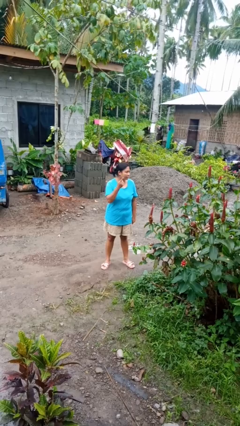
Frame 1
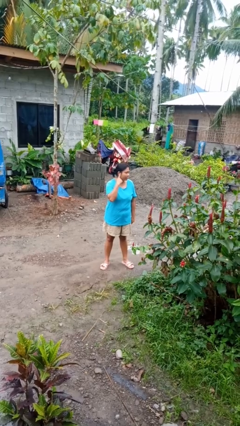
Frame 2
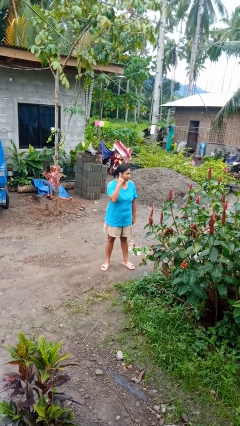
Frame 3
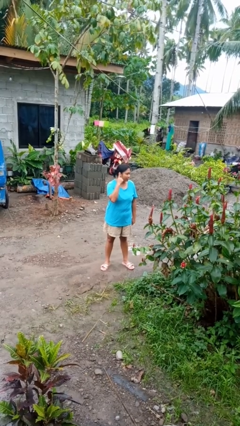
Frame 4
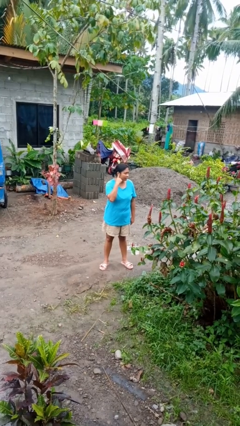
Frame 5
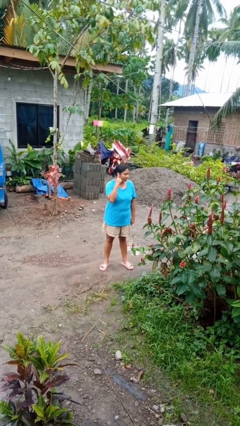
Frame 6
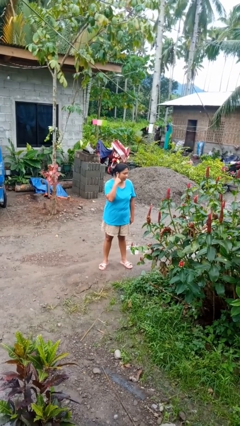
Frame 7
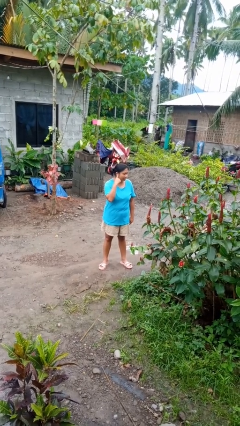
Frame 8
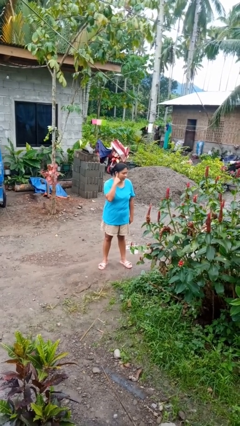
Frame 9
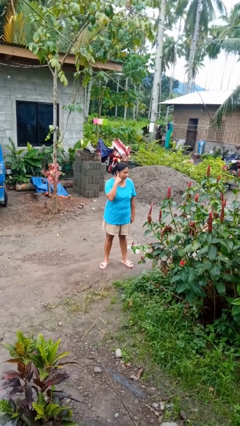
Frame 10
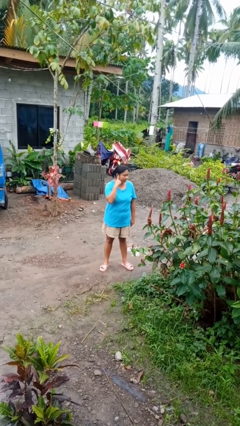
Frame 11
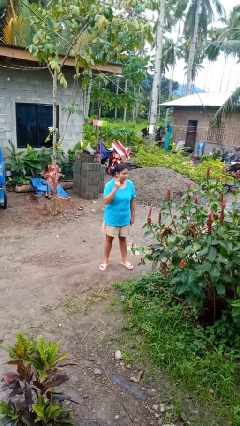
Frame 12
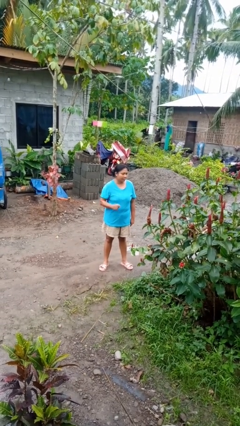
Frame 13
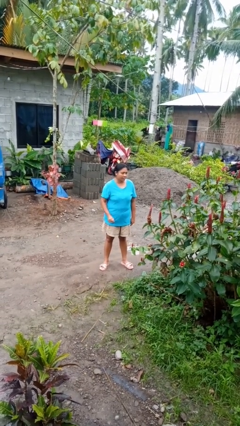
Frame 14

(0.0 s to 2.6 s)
person gestures listen closely

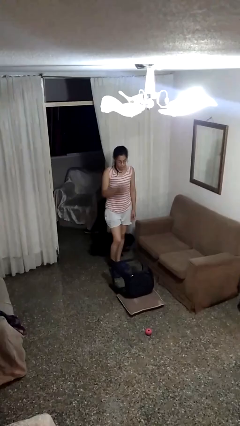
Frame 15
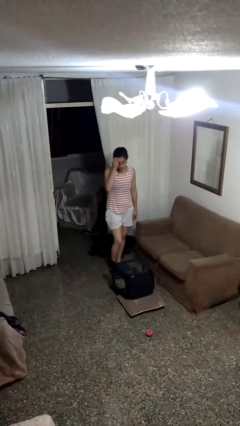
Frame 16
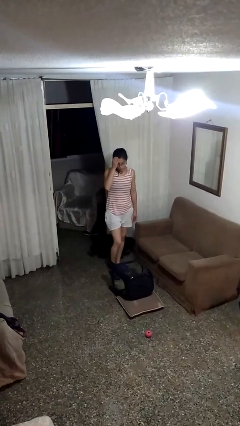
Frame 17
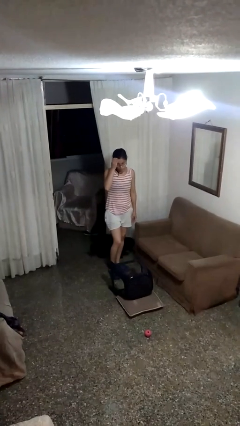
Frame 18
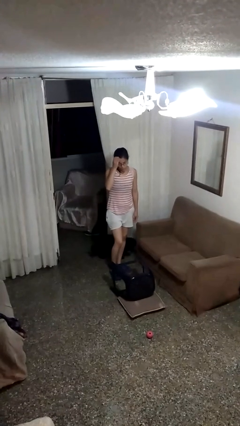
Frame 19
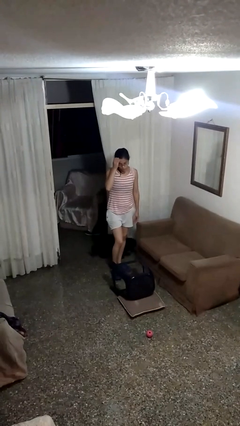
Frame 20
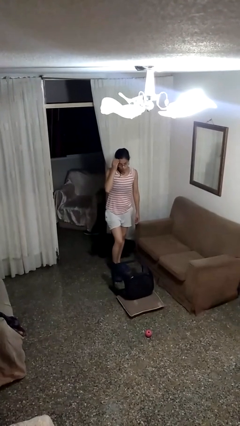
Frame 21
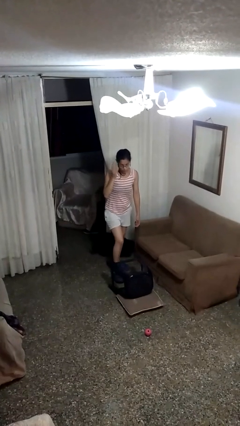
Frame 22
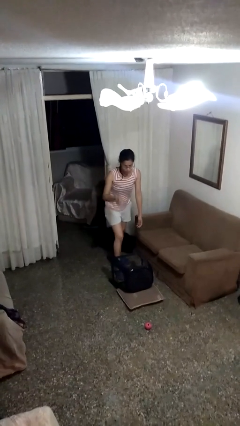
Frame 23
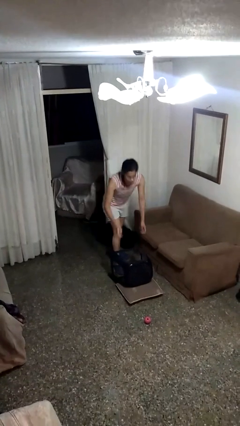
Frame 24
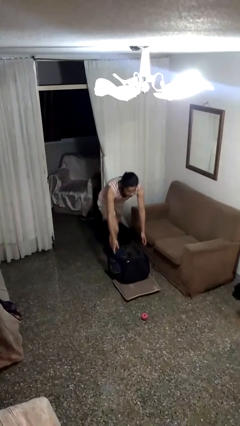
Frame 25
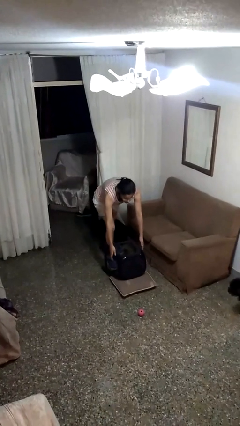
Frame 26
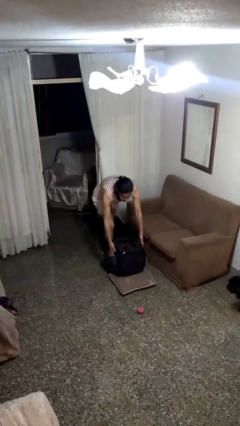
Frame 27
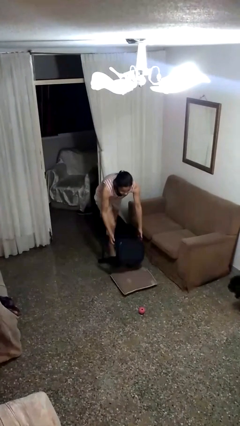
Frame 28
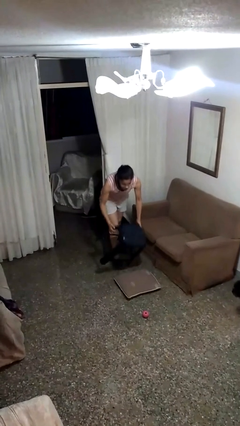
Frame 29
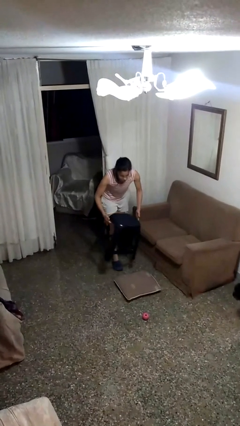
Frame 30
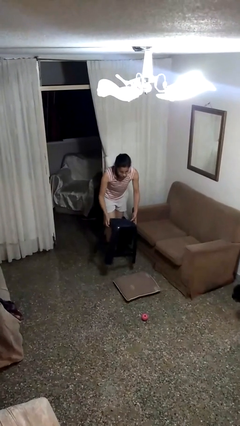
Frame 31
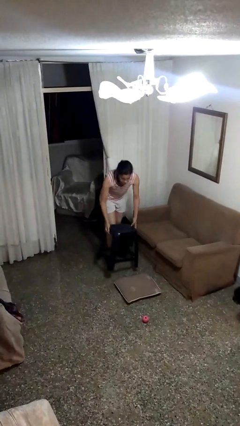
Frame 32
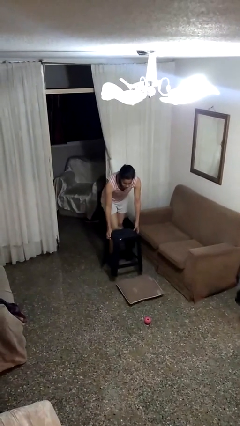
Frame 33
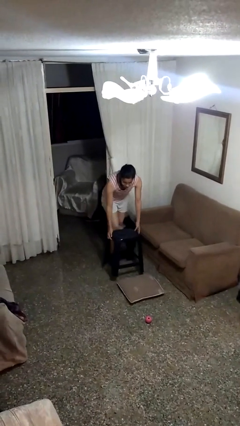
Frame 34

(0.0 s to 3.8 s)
person sets upright furniture

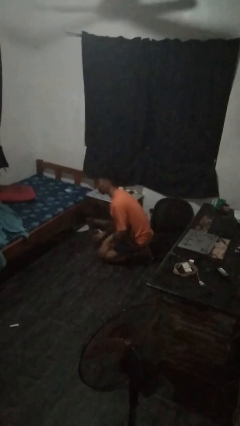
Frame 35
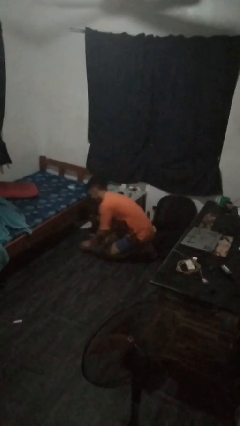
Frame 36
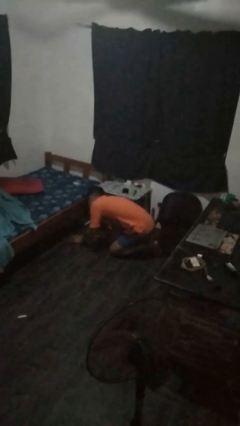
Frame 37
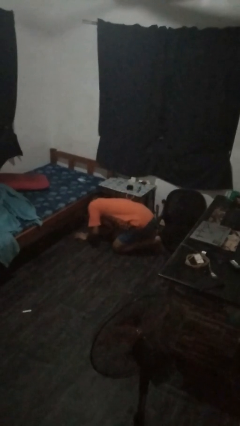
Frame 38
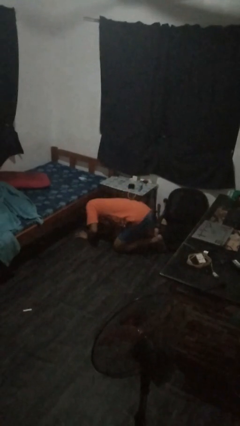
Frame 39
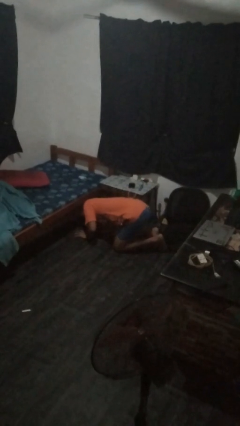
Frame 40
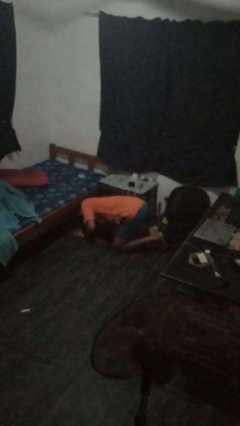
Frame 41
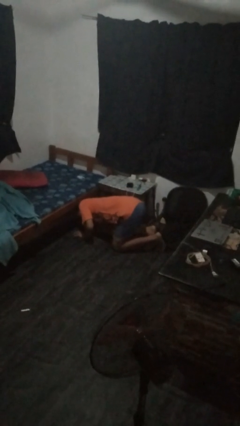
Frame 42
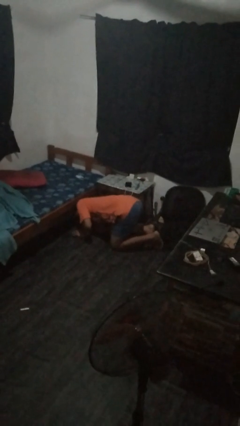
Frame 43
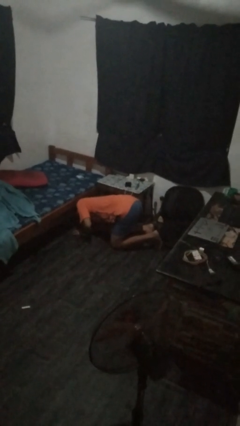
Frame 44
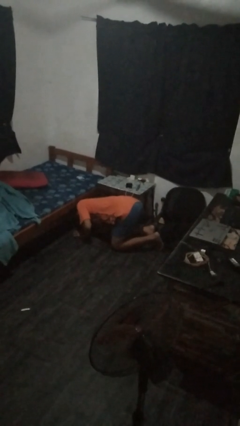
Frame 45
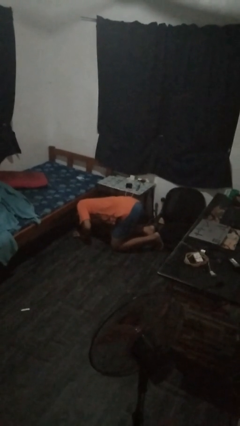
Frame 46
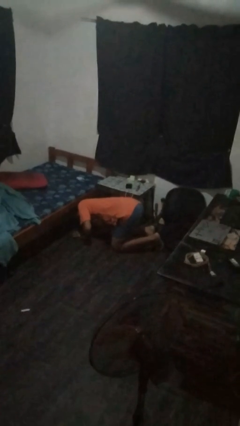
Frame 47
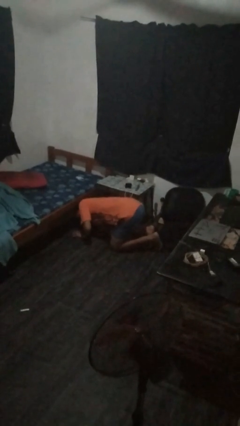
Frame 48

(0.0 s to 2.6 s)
person searches under bed

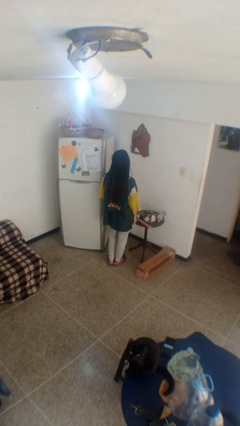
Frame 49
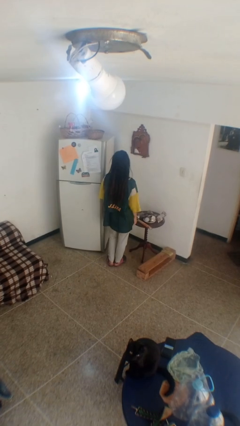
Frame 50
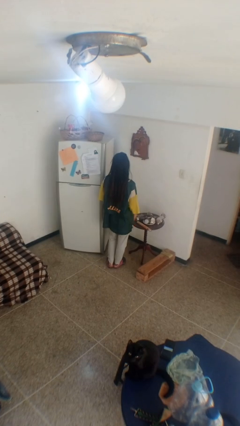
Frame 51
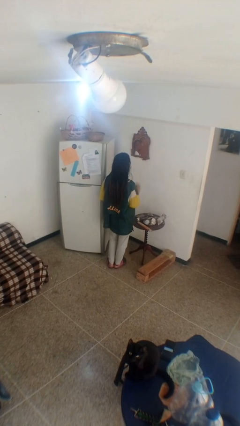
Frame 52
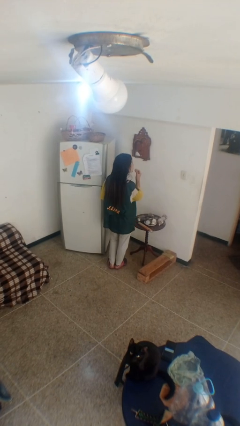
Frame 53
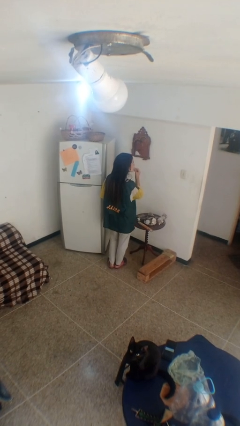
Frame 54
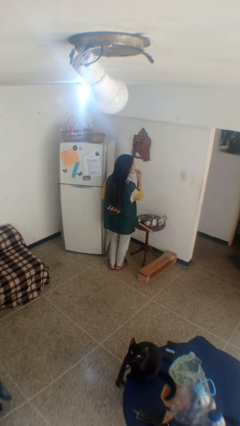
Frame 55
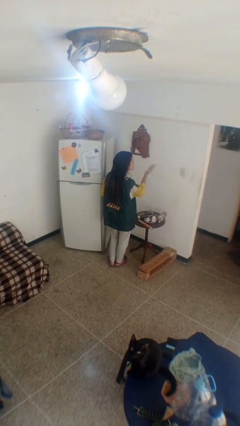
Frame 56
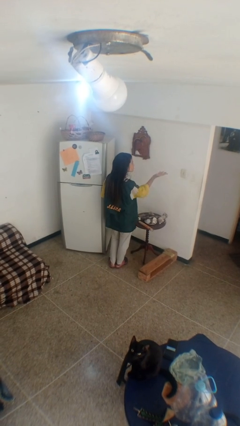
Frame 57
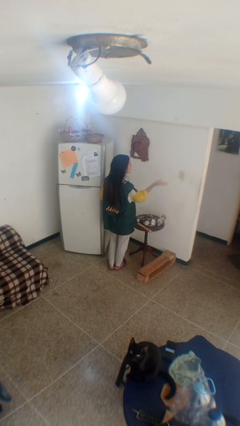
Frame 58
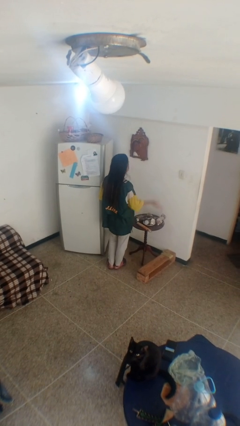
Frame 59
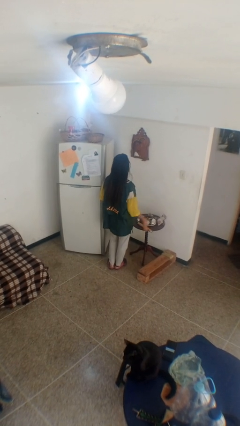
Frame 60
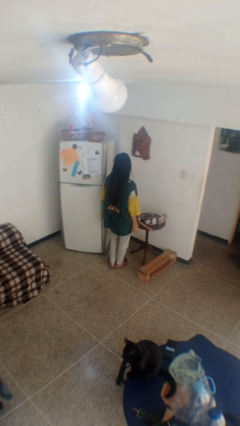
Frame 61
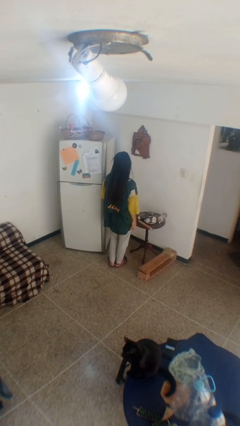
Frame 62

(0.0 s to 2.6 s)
person gestures blow kiss

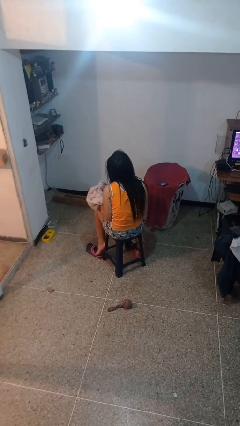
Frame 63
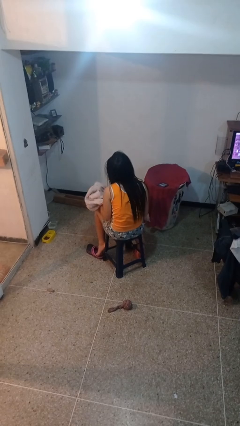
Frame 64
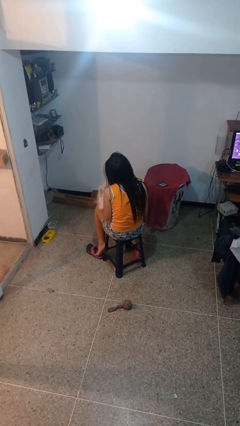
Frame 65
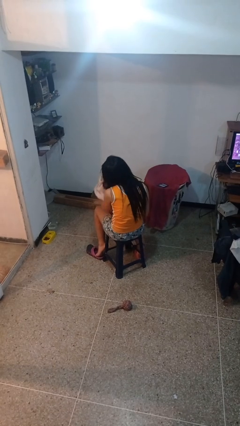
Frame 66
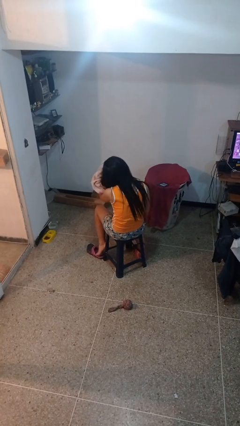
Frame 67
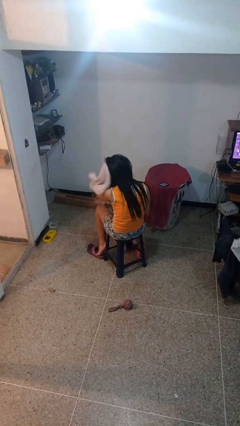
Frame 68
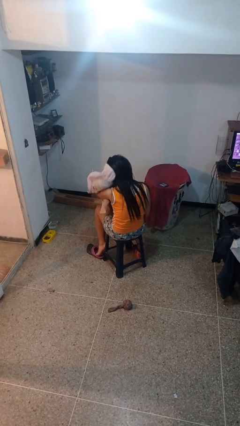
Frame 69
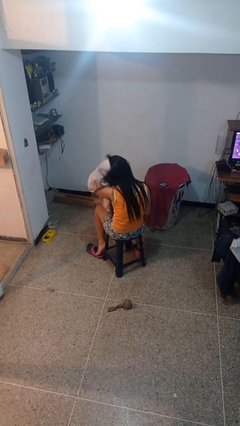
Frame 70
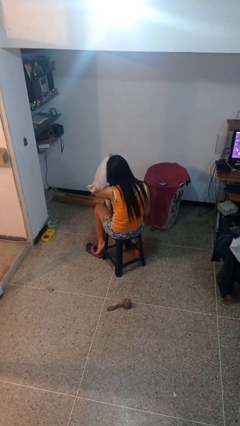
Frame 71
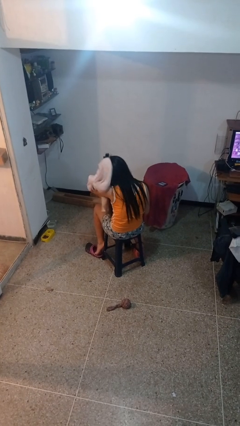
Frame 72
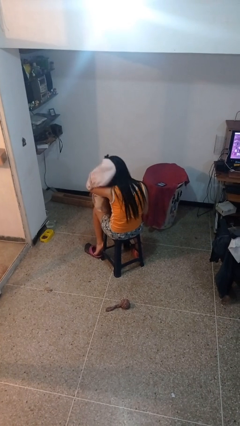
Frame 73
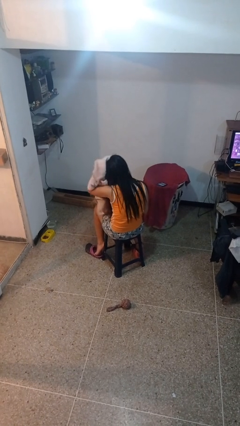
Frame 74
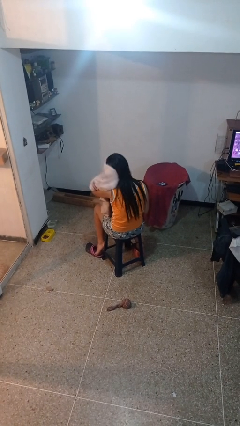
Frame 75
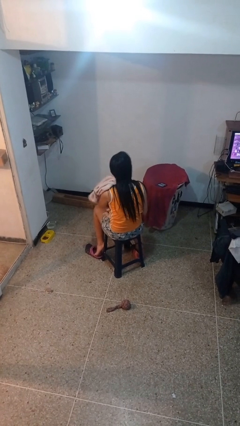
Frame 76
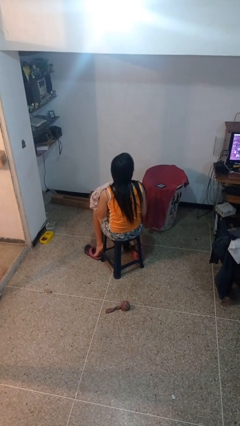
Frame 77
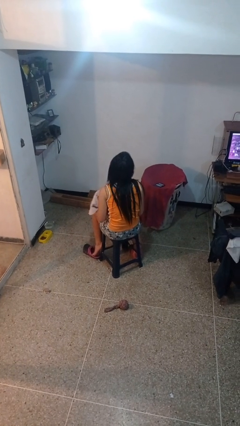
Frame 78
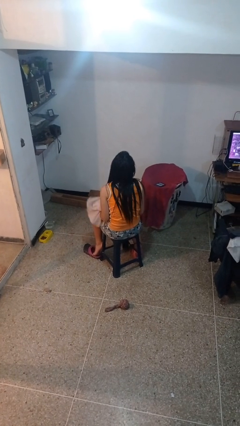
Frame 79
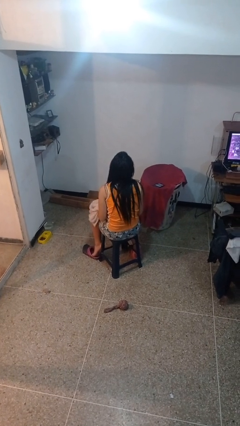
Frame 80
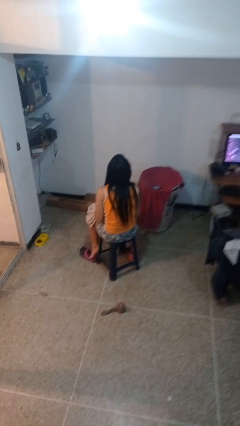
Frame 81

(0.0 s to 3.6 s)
person dries hair with towel

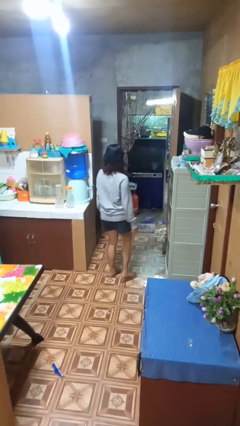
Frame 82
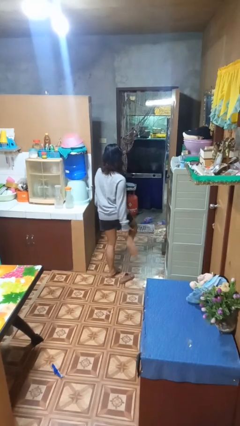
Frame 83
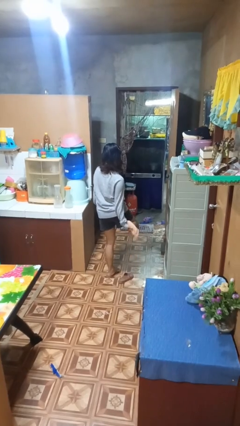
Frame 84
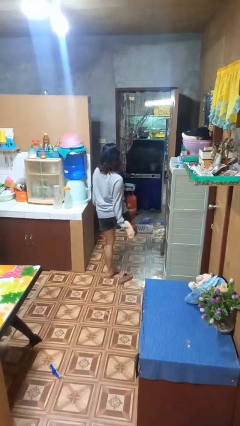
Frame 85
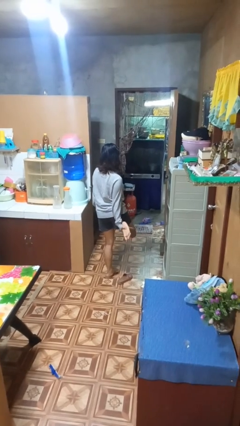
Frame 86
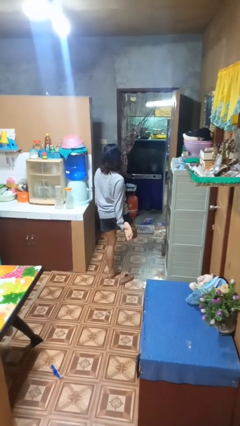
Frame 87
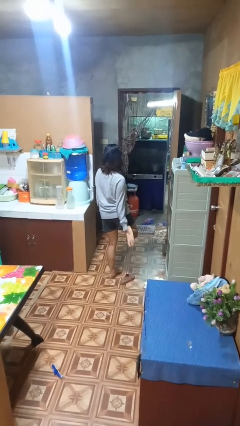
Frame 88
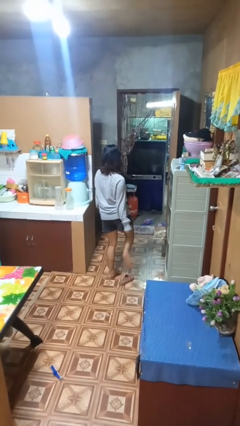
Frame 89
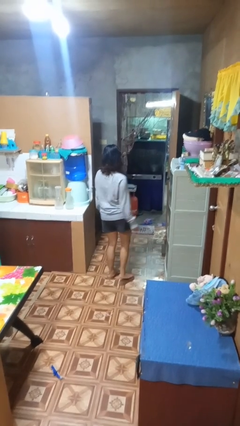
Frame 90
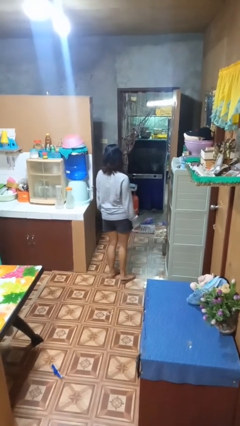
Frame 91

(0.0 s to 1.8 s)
person rubs foot

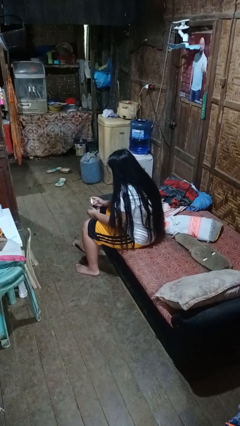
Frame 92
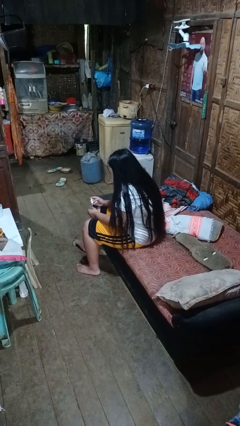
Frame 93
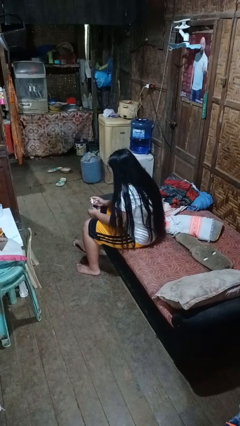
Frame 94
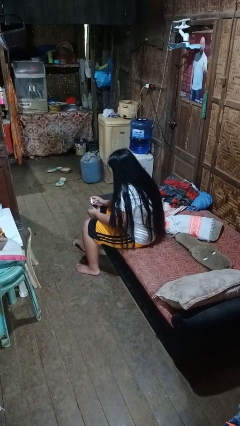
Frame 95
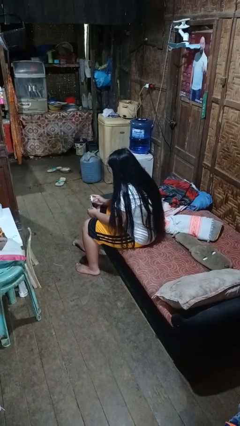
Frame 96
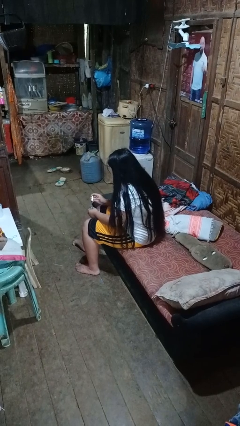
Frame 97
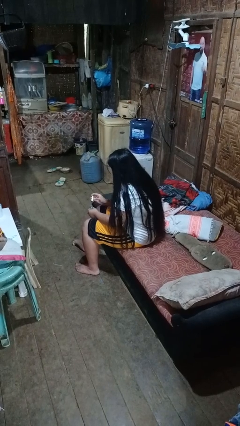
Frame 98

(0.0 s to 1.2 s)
person paints fingernails
